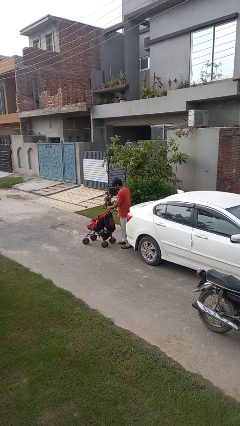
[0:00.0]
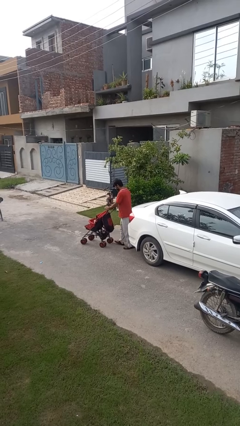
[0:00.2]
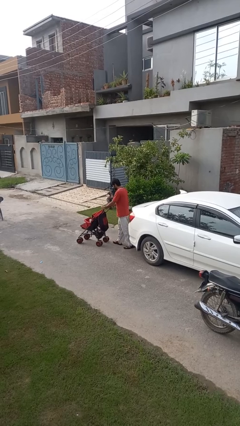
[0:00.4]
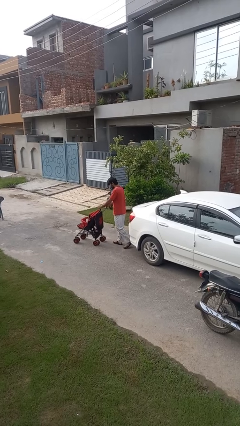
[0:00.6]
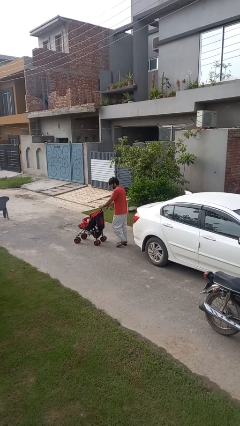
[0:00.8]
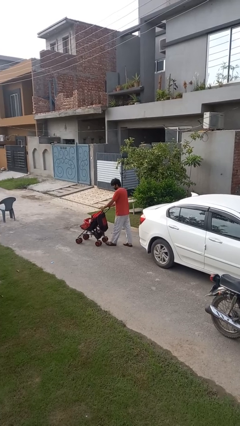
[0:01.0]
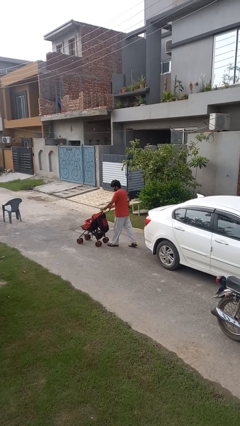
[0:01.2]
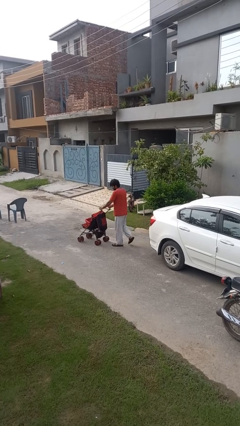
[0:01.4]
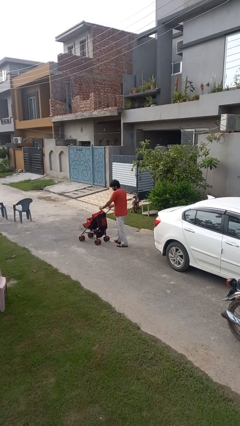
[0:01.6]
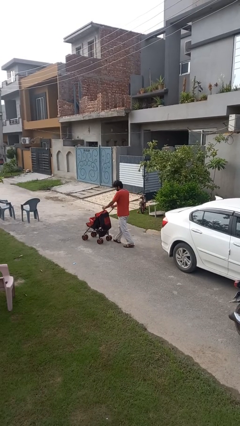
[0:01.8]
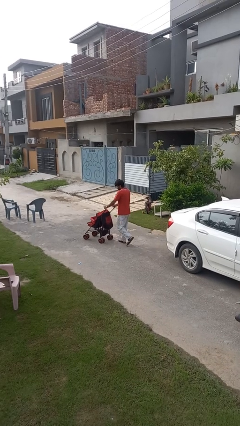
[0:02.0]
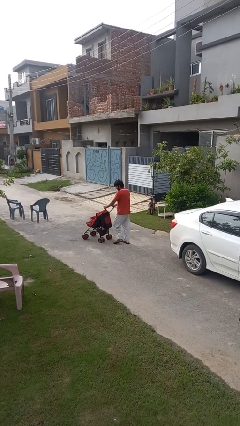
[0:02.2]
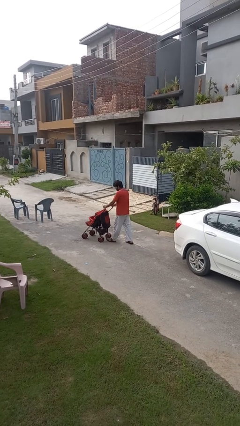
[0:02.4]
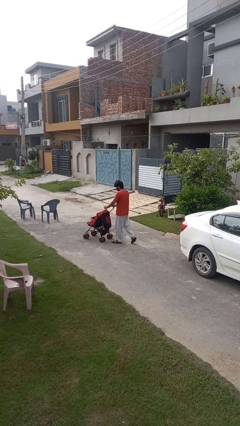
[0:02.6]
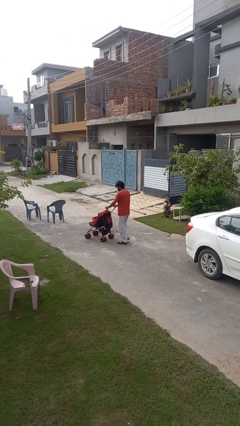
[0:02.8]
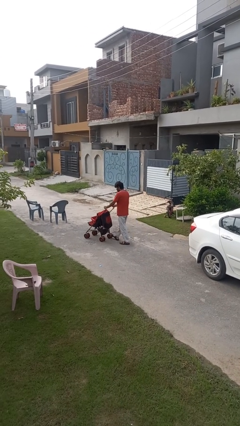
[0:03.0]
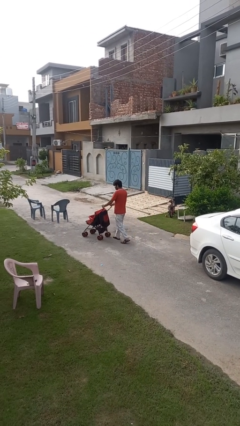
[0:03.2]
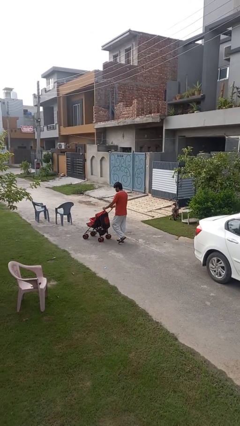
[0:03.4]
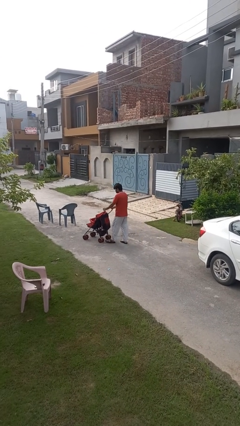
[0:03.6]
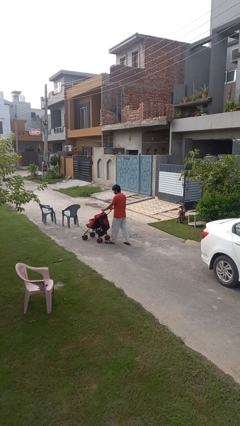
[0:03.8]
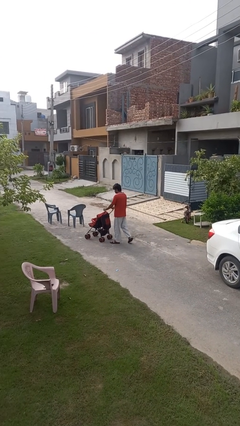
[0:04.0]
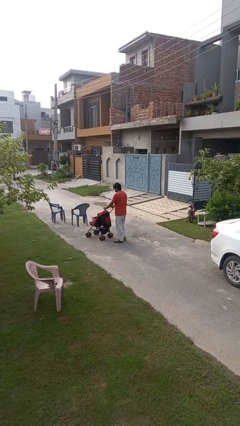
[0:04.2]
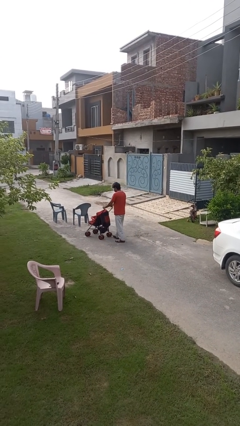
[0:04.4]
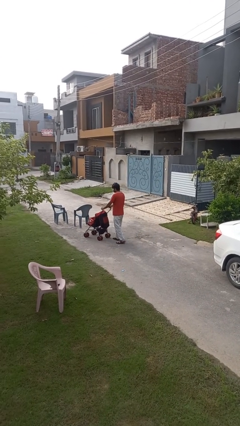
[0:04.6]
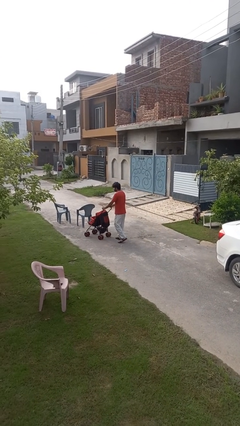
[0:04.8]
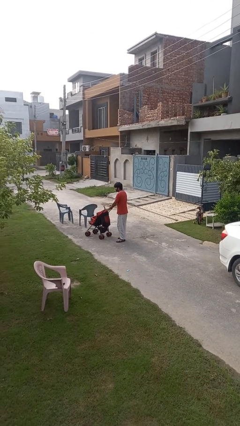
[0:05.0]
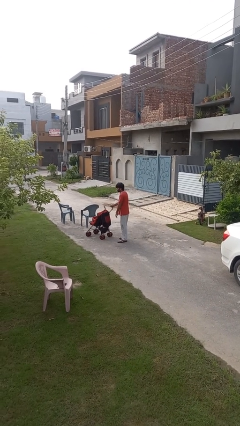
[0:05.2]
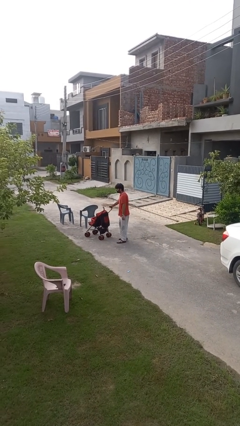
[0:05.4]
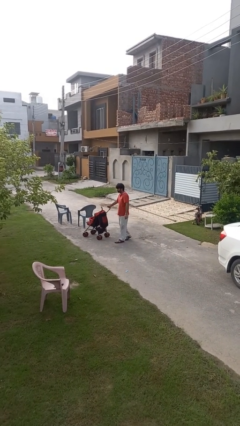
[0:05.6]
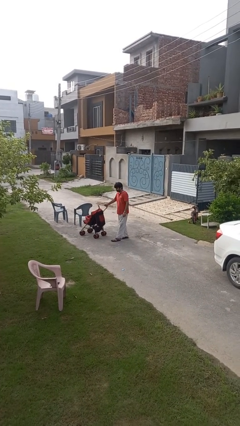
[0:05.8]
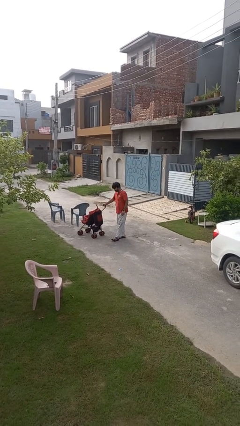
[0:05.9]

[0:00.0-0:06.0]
person pushes wheeled cart

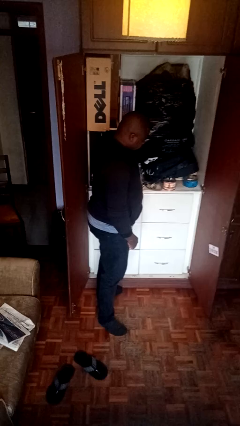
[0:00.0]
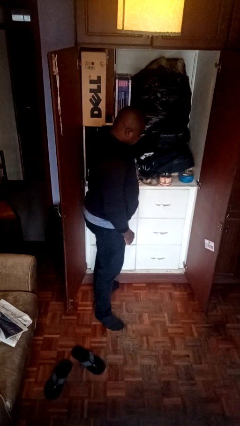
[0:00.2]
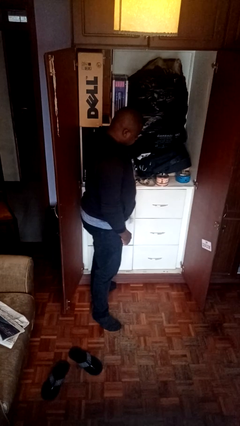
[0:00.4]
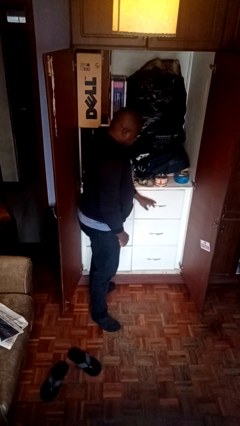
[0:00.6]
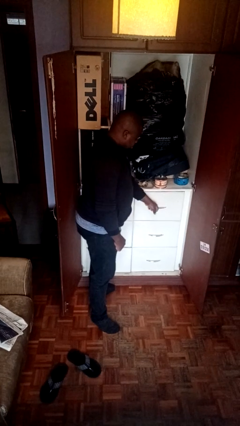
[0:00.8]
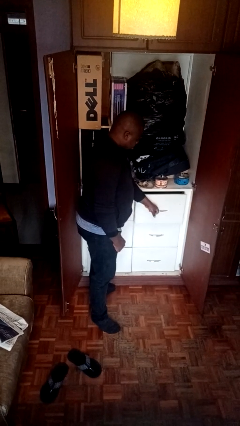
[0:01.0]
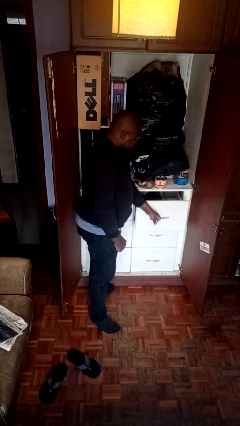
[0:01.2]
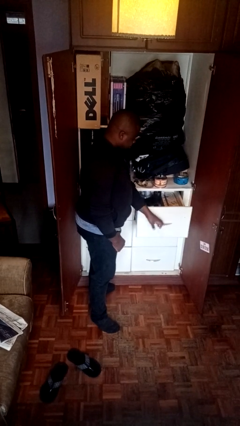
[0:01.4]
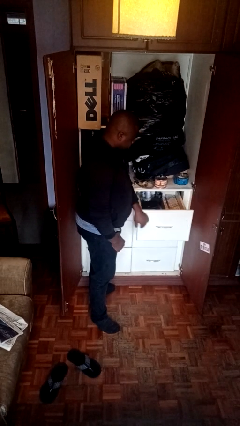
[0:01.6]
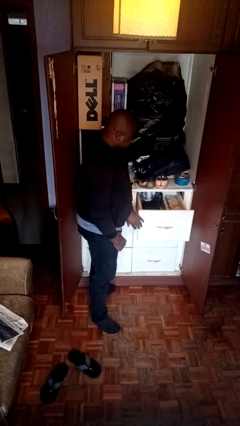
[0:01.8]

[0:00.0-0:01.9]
person opens dresser drawer

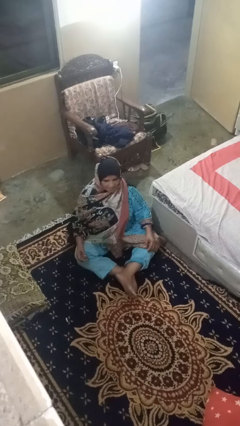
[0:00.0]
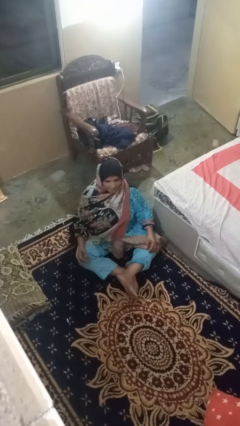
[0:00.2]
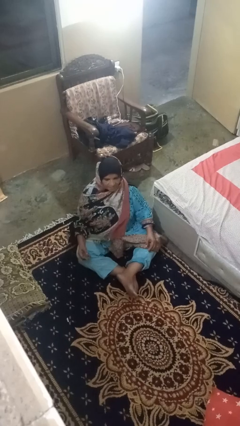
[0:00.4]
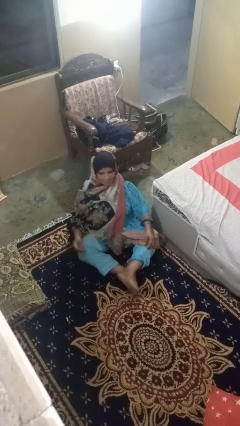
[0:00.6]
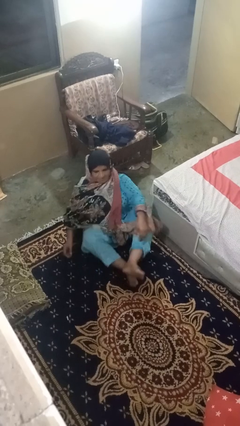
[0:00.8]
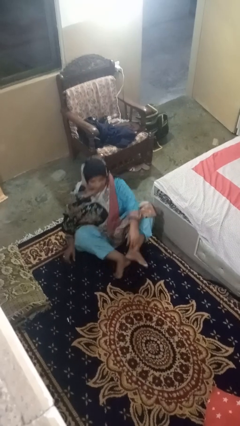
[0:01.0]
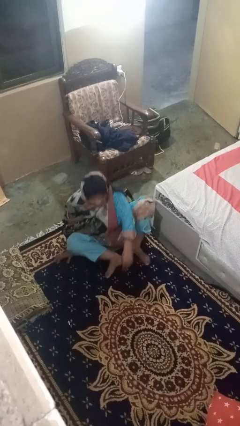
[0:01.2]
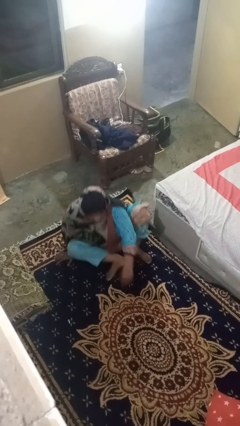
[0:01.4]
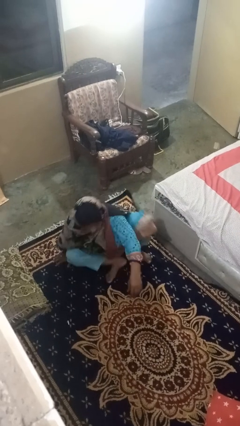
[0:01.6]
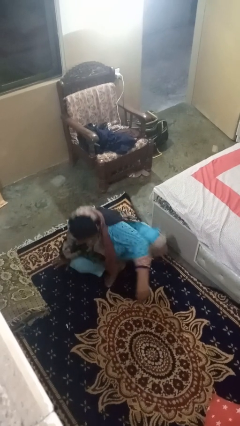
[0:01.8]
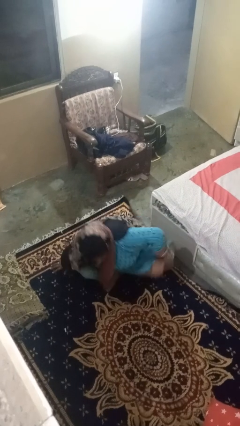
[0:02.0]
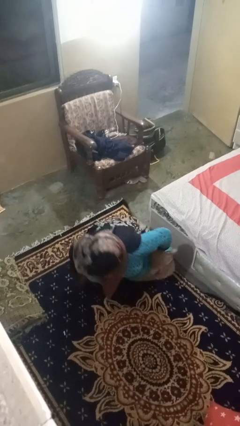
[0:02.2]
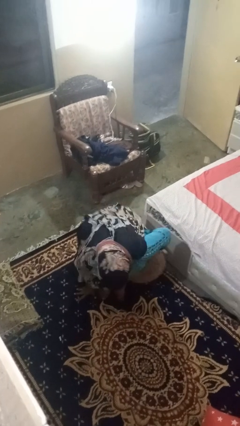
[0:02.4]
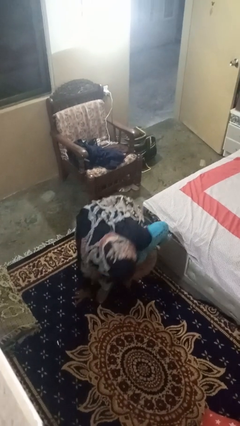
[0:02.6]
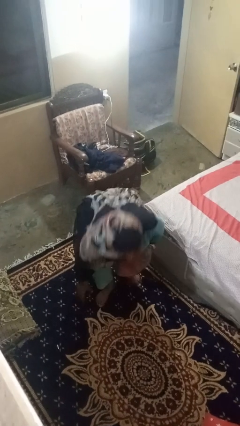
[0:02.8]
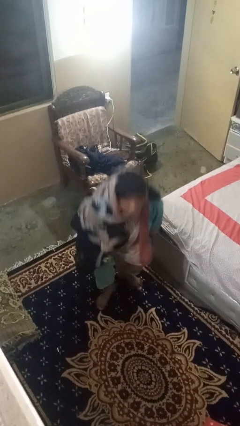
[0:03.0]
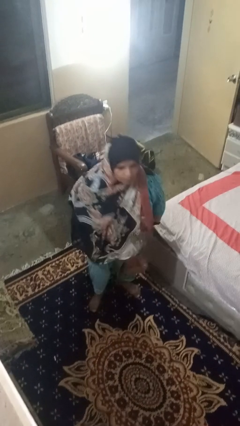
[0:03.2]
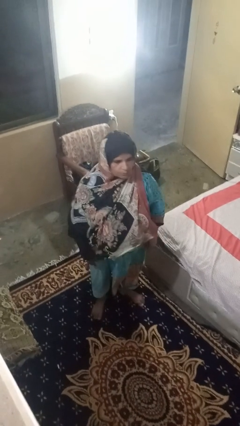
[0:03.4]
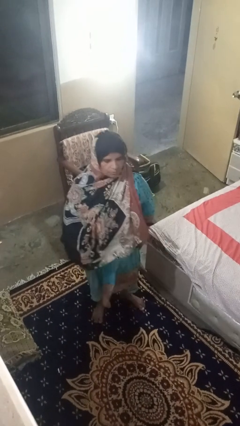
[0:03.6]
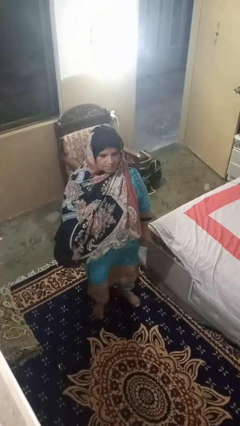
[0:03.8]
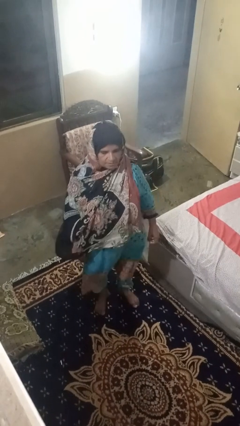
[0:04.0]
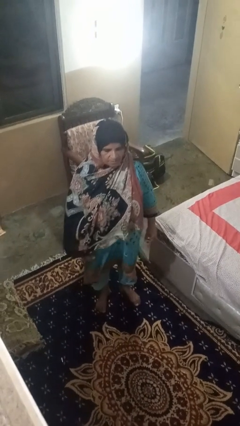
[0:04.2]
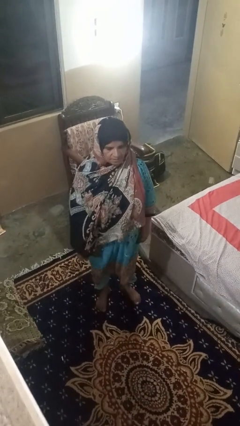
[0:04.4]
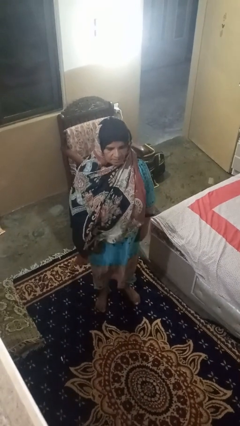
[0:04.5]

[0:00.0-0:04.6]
person stands up from floor

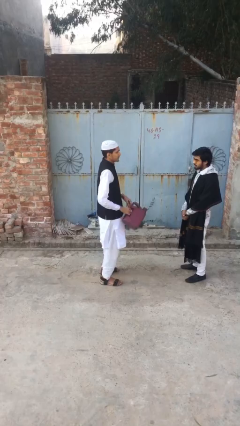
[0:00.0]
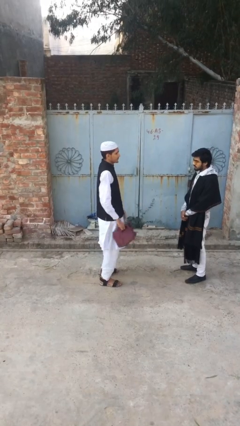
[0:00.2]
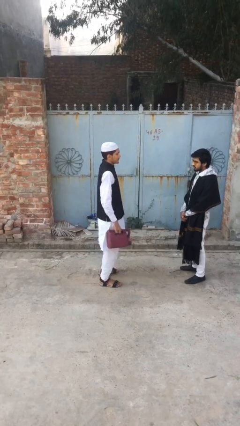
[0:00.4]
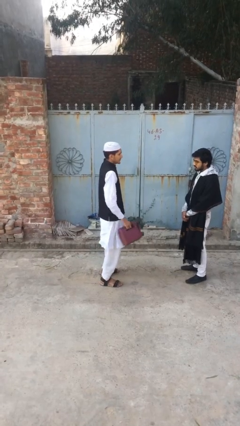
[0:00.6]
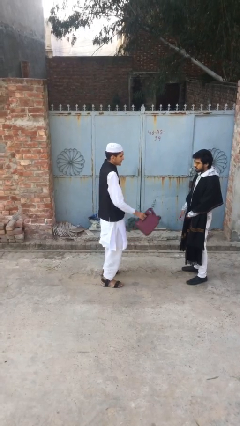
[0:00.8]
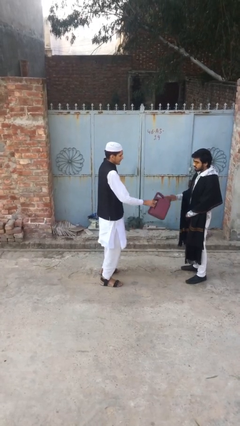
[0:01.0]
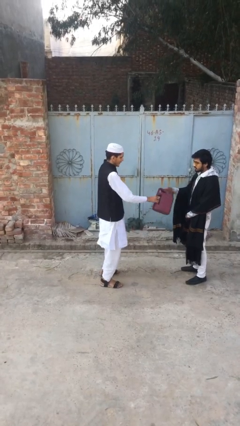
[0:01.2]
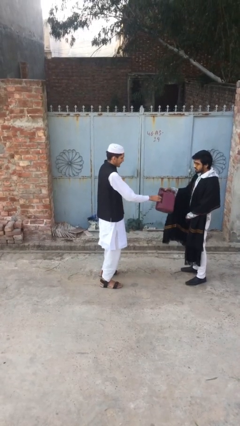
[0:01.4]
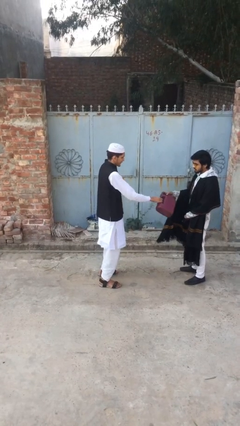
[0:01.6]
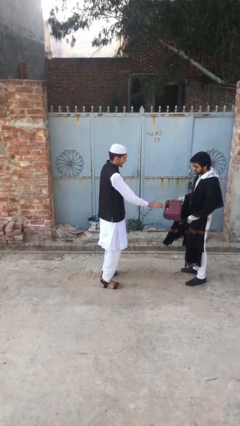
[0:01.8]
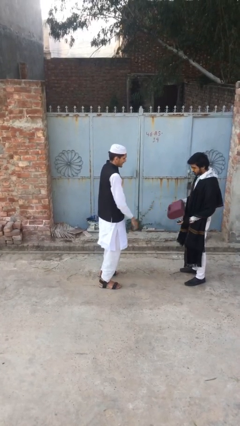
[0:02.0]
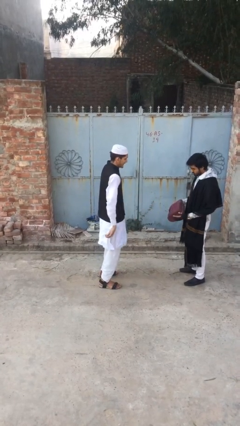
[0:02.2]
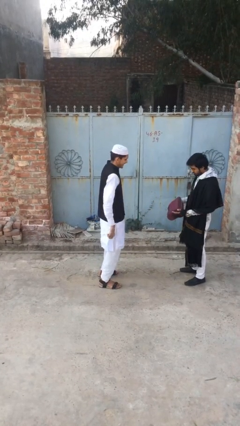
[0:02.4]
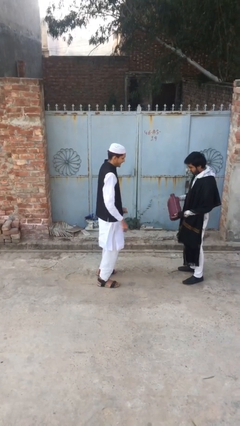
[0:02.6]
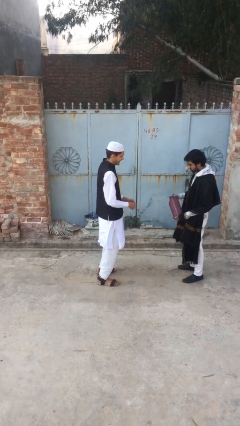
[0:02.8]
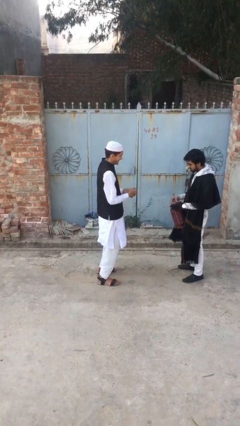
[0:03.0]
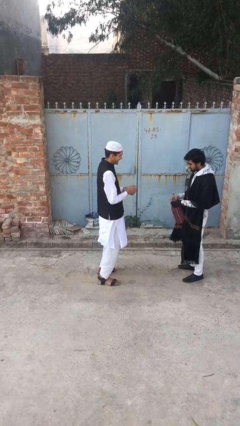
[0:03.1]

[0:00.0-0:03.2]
person transfers object to person

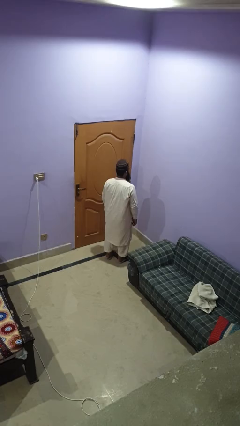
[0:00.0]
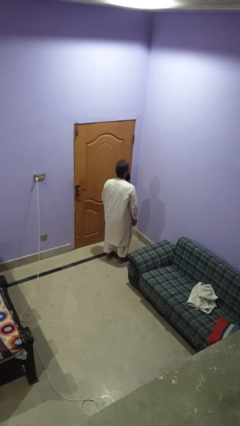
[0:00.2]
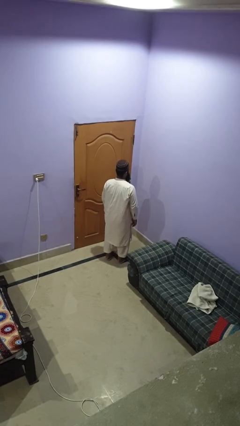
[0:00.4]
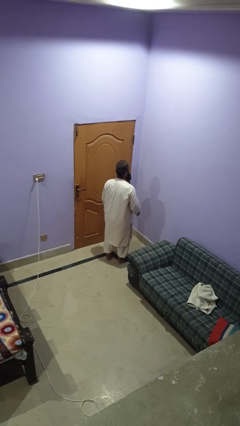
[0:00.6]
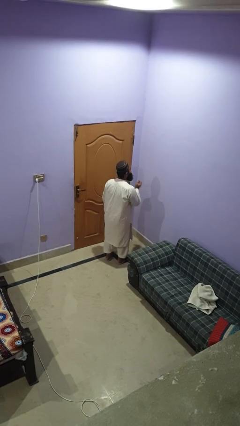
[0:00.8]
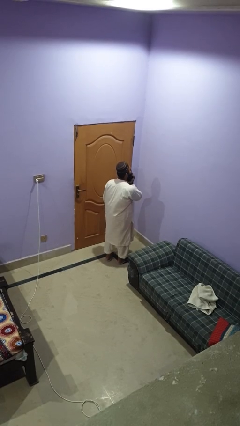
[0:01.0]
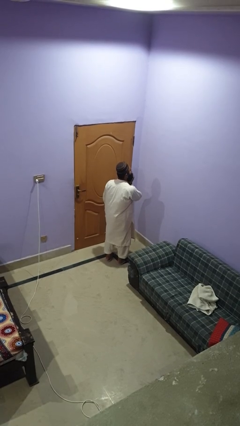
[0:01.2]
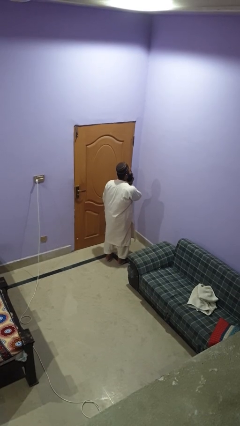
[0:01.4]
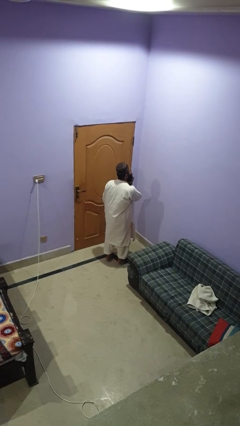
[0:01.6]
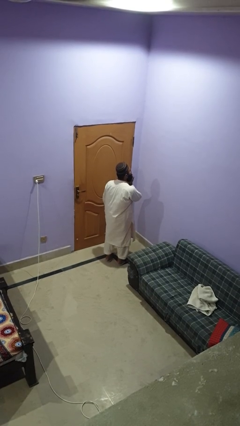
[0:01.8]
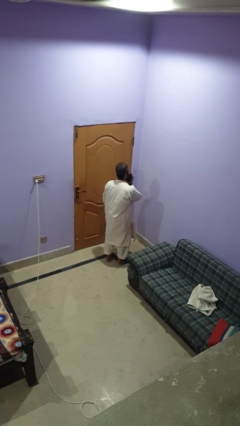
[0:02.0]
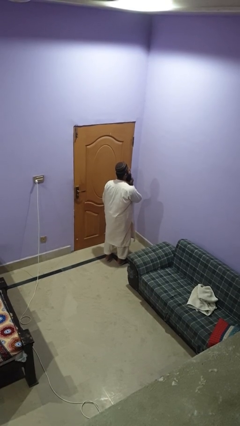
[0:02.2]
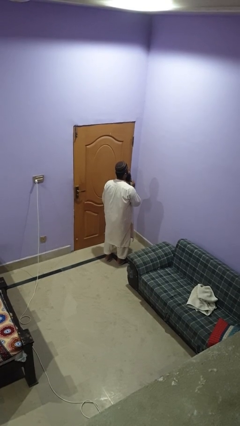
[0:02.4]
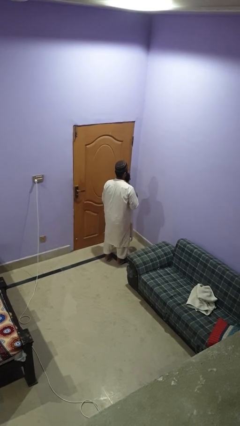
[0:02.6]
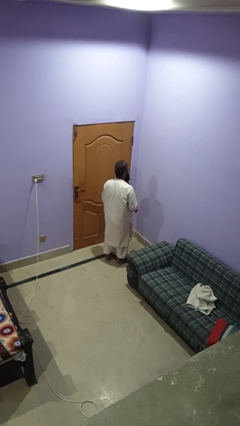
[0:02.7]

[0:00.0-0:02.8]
person strokes chin
